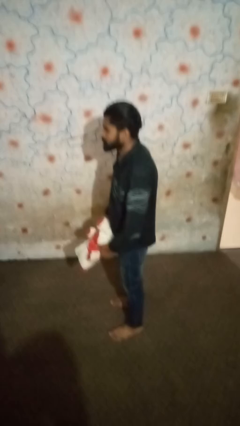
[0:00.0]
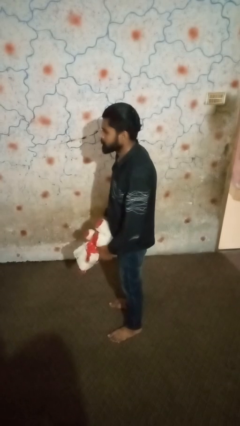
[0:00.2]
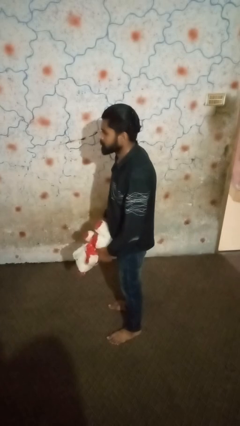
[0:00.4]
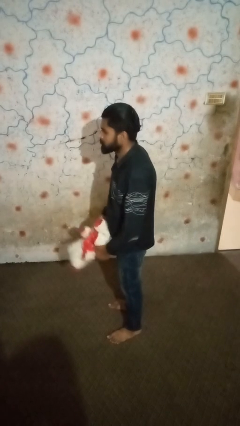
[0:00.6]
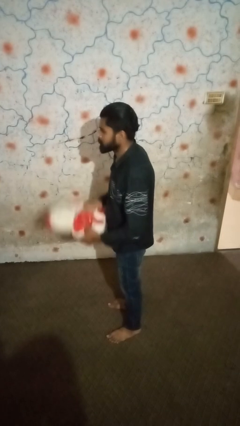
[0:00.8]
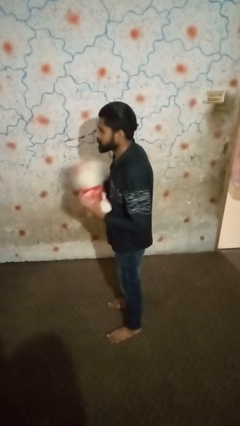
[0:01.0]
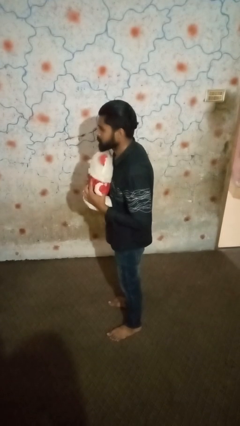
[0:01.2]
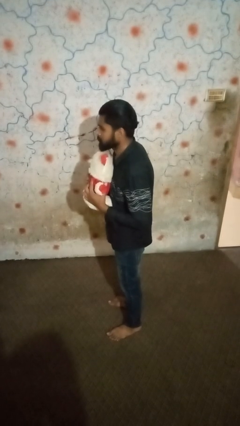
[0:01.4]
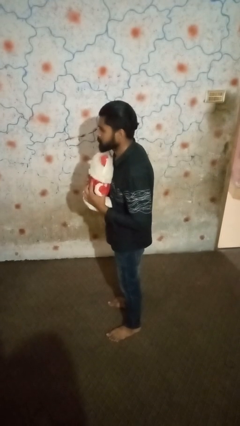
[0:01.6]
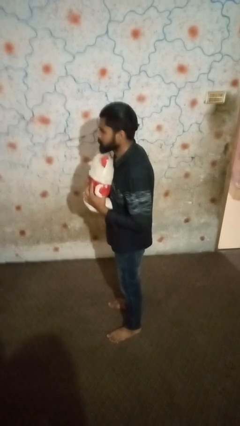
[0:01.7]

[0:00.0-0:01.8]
person hugs stuffed animal

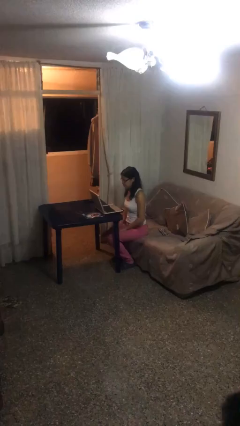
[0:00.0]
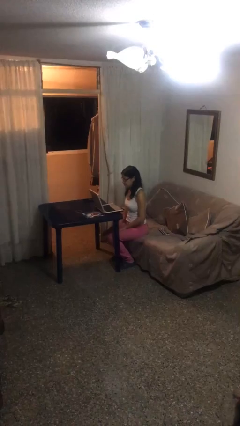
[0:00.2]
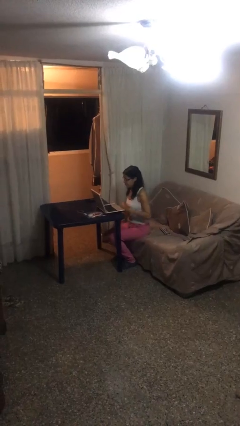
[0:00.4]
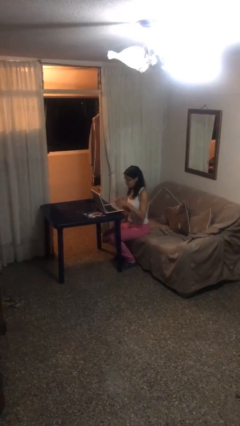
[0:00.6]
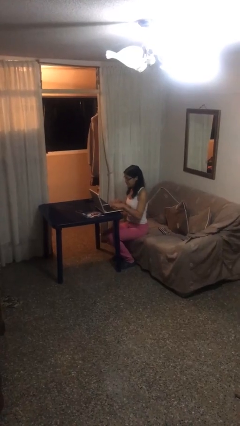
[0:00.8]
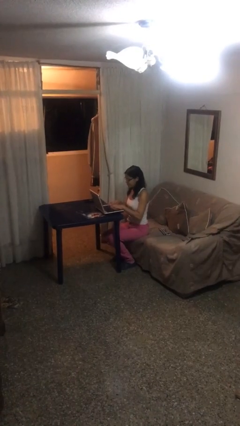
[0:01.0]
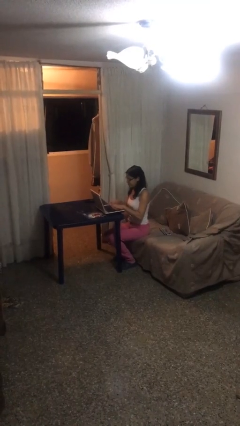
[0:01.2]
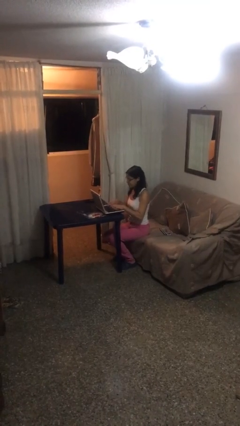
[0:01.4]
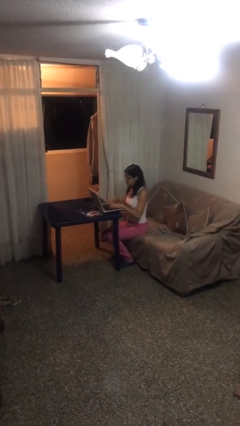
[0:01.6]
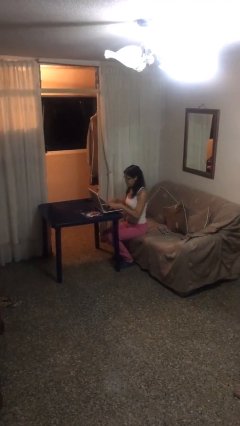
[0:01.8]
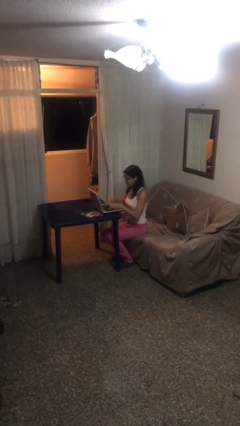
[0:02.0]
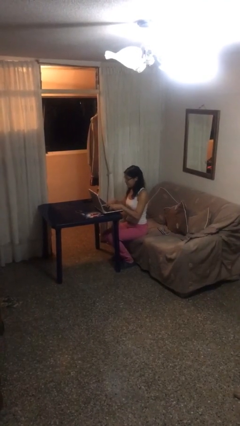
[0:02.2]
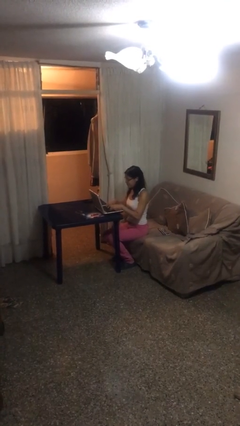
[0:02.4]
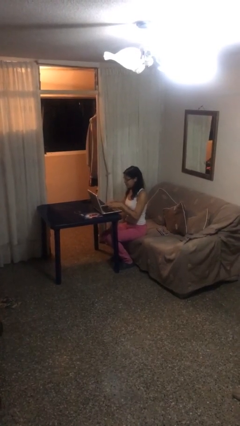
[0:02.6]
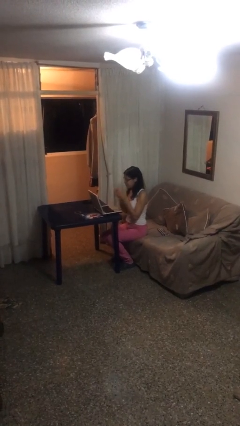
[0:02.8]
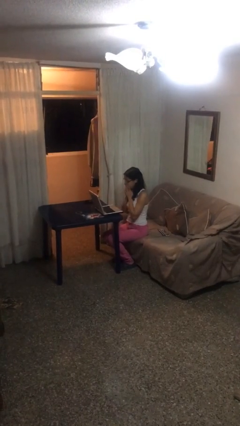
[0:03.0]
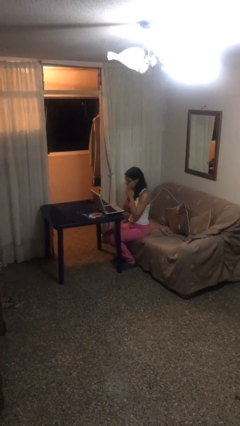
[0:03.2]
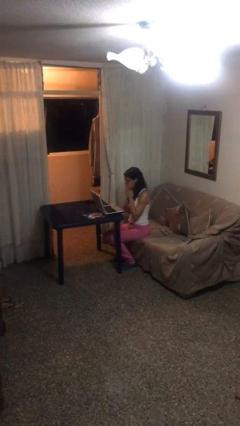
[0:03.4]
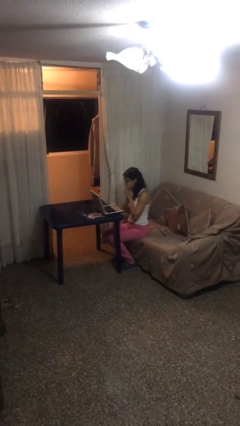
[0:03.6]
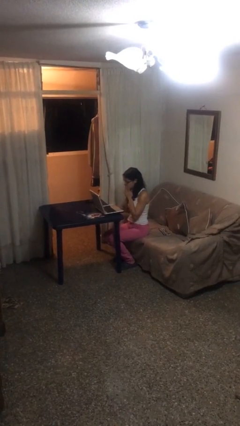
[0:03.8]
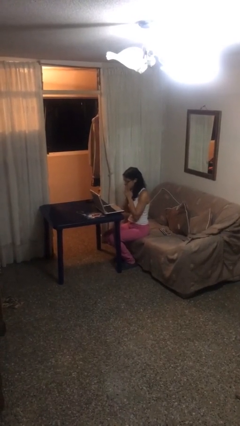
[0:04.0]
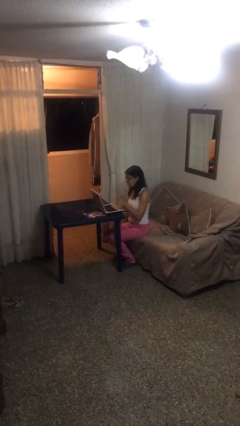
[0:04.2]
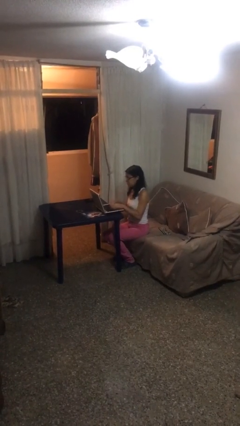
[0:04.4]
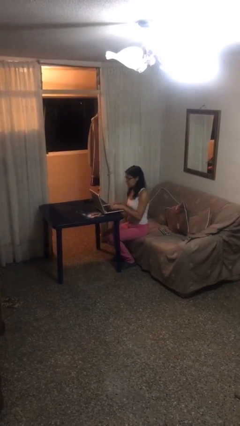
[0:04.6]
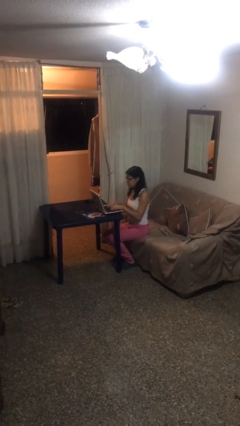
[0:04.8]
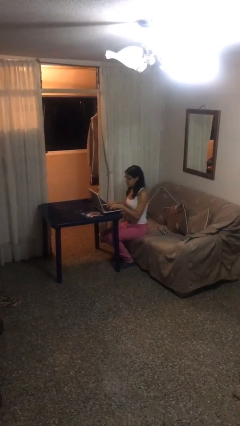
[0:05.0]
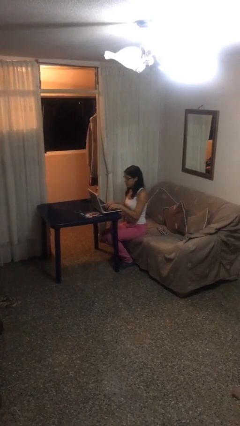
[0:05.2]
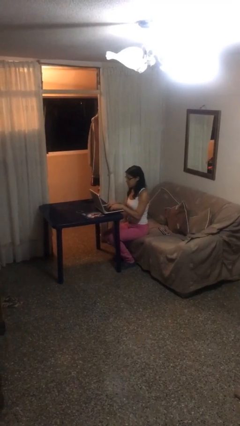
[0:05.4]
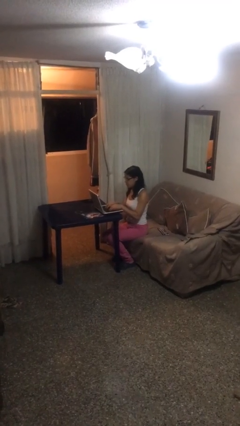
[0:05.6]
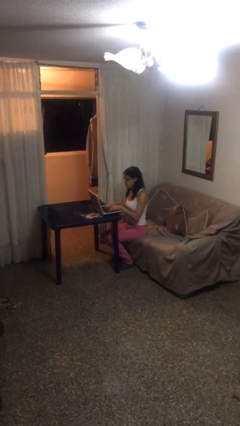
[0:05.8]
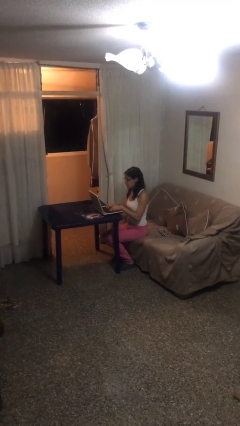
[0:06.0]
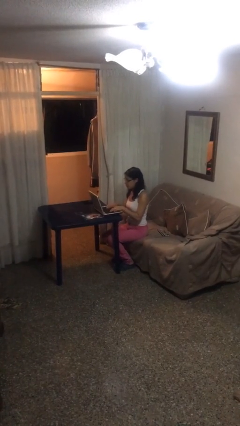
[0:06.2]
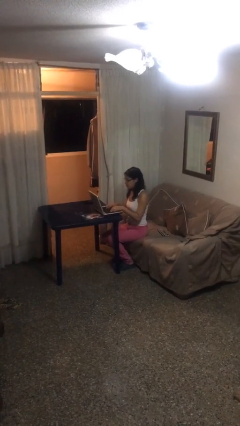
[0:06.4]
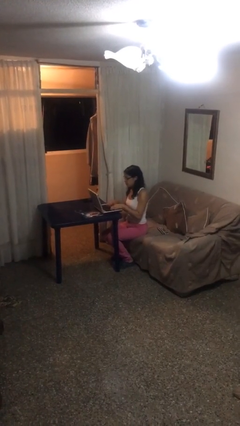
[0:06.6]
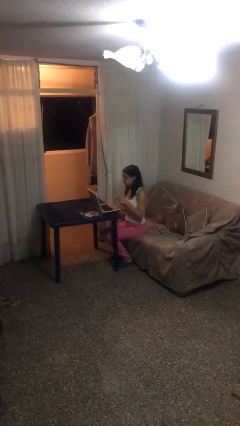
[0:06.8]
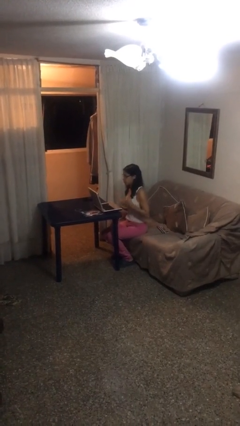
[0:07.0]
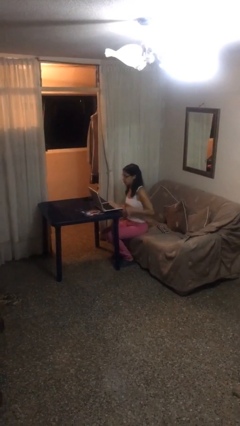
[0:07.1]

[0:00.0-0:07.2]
person interacts with laptop

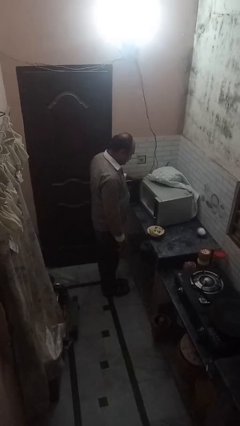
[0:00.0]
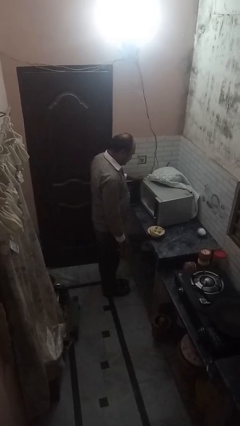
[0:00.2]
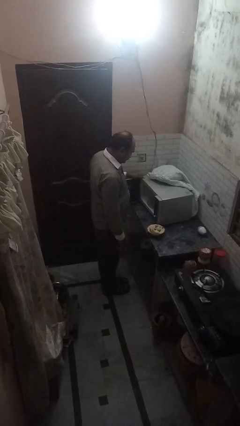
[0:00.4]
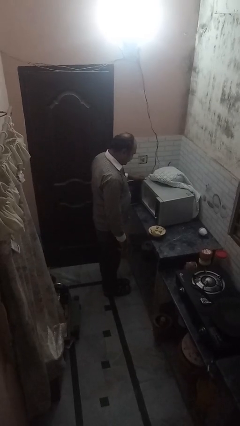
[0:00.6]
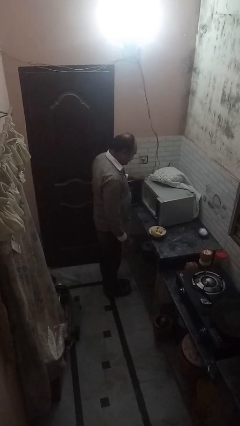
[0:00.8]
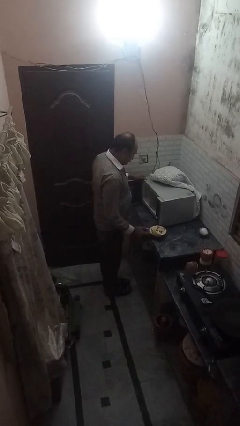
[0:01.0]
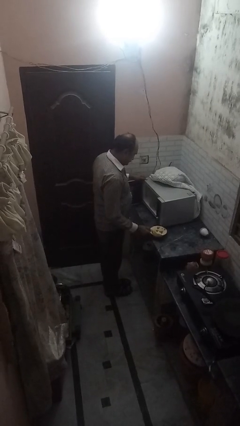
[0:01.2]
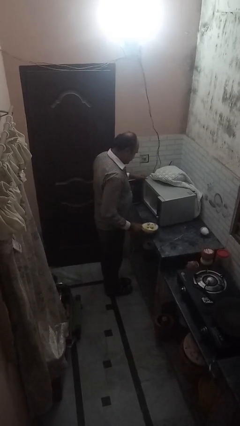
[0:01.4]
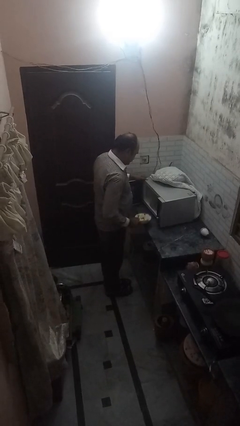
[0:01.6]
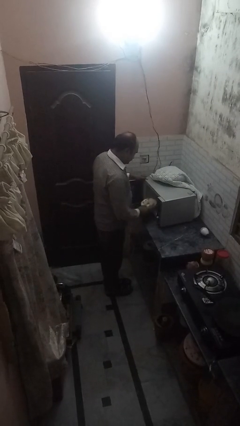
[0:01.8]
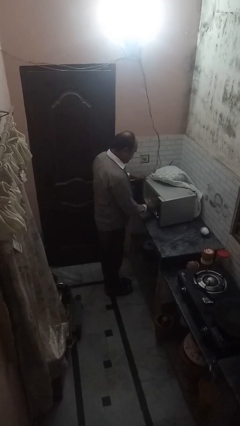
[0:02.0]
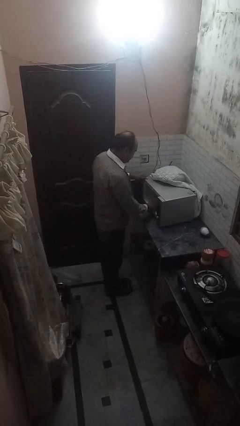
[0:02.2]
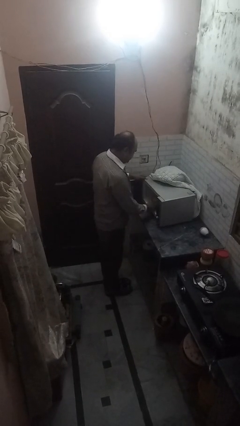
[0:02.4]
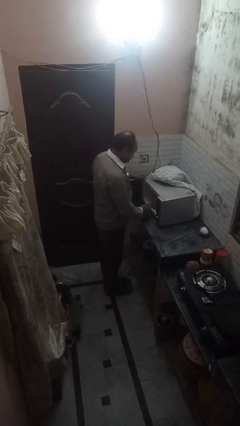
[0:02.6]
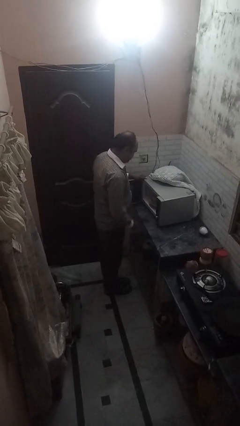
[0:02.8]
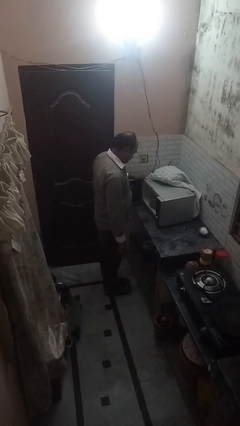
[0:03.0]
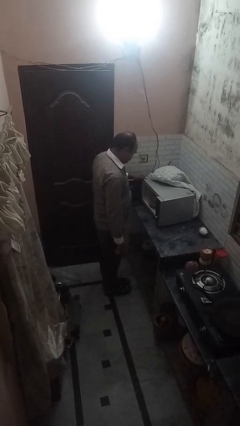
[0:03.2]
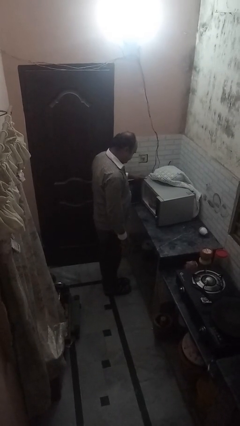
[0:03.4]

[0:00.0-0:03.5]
person puts object into microwave

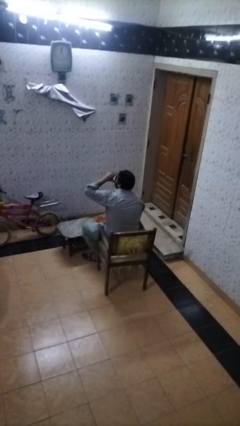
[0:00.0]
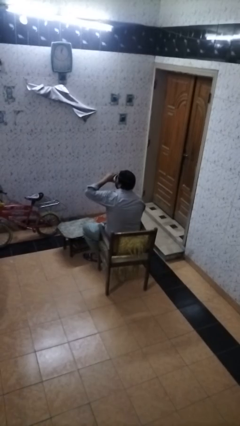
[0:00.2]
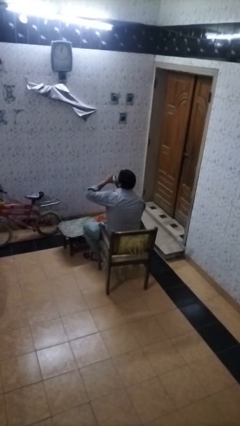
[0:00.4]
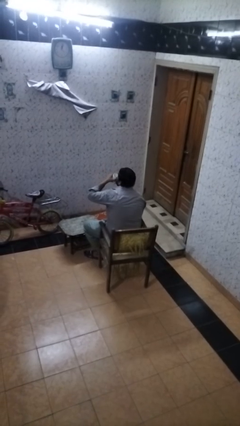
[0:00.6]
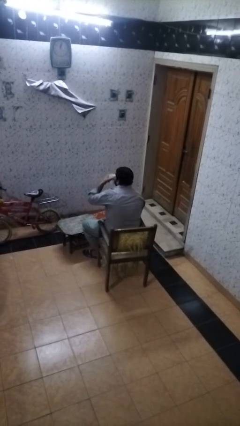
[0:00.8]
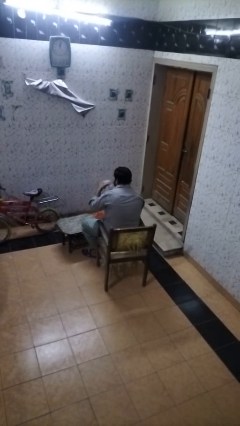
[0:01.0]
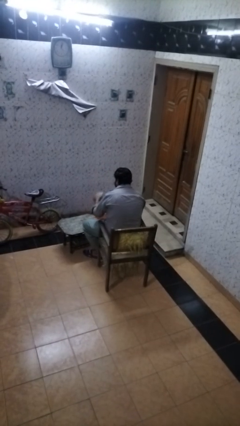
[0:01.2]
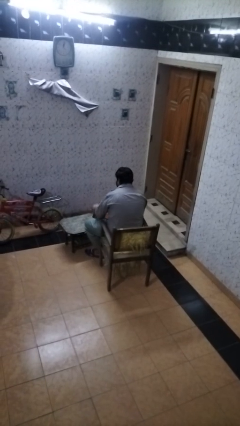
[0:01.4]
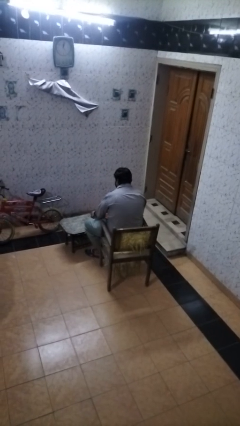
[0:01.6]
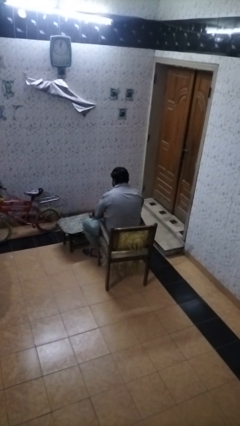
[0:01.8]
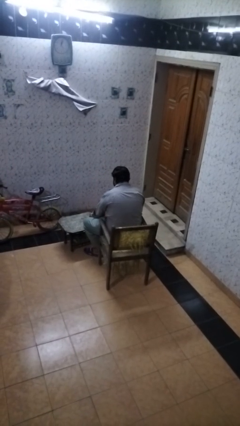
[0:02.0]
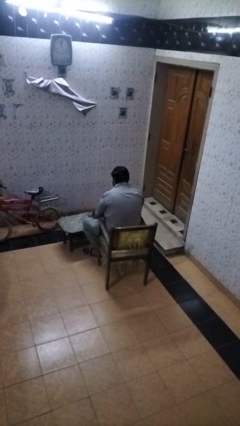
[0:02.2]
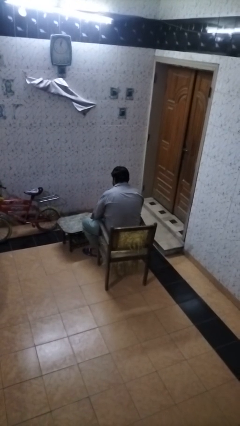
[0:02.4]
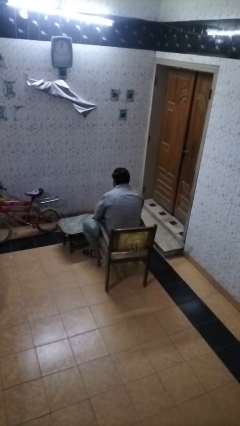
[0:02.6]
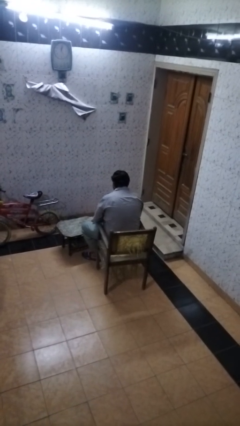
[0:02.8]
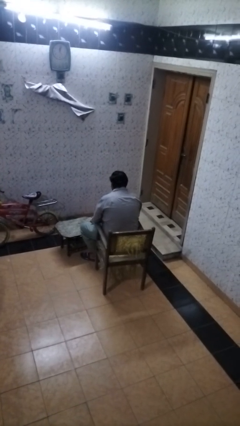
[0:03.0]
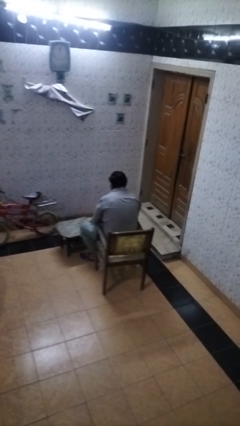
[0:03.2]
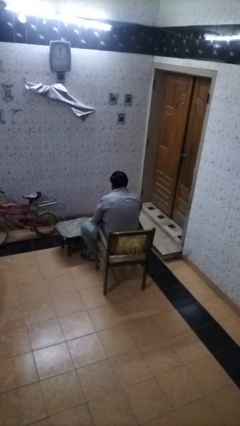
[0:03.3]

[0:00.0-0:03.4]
person puts down object on table

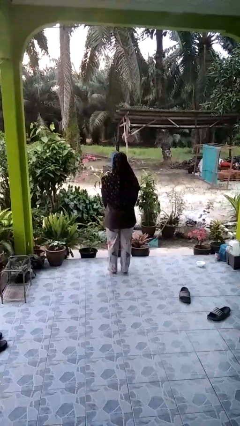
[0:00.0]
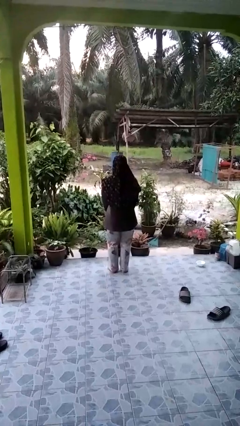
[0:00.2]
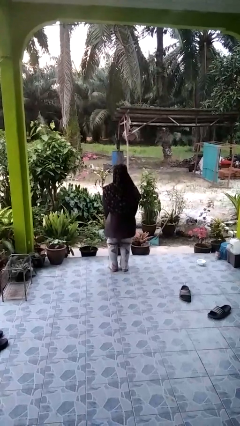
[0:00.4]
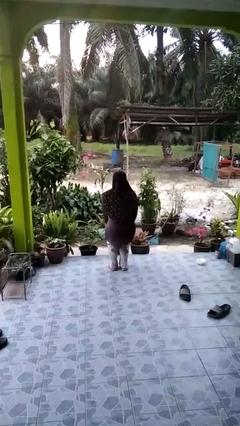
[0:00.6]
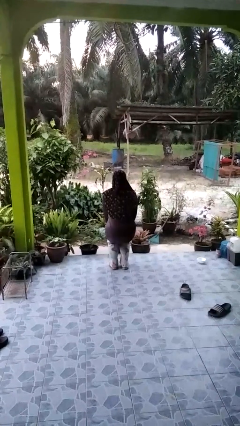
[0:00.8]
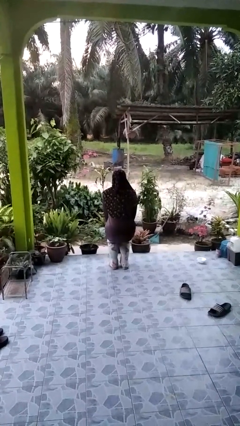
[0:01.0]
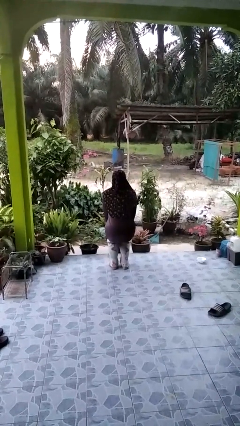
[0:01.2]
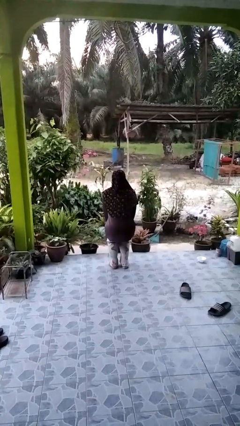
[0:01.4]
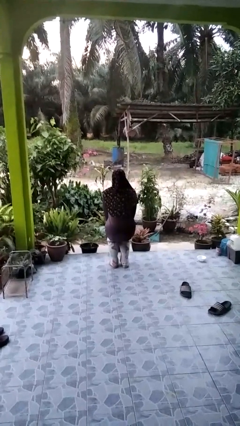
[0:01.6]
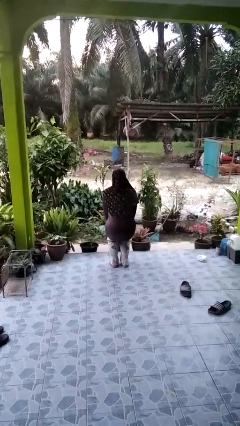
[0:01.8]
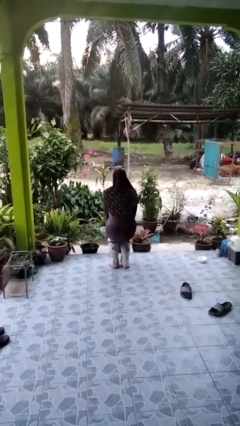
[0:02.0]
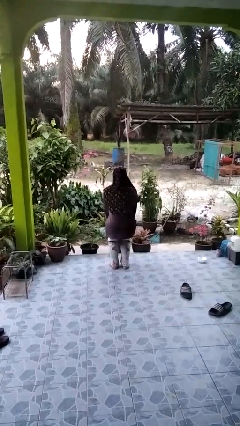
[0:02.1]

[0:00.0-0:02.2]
person squats
